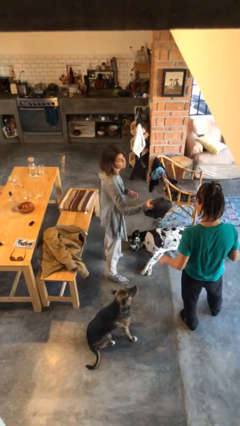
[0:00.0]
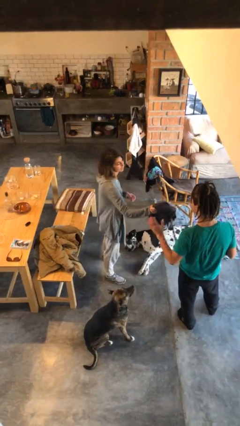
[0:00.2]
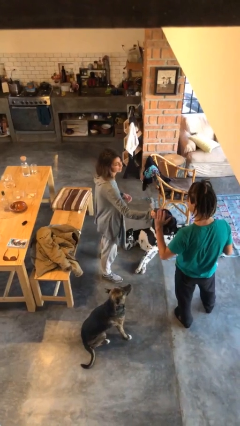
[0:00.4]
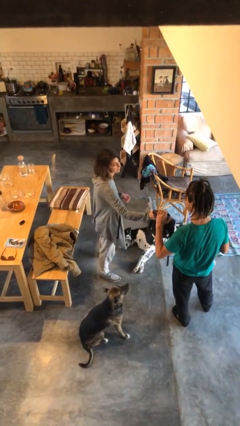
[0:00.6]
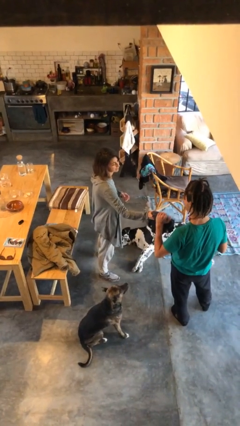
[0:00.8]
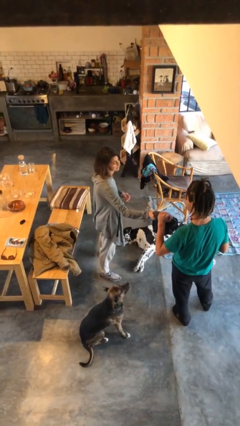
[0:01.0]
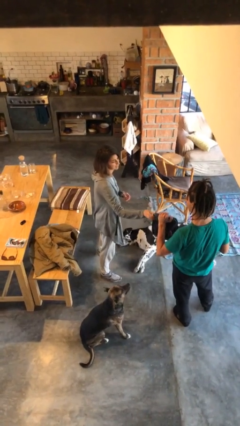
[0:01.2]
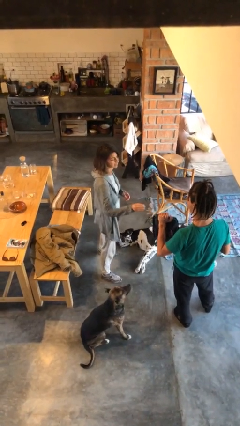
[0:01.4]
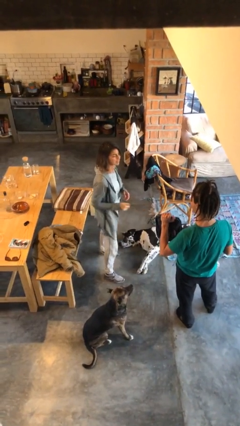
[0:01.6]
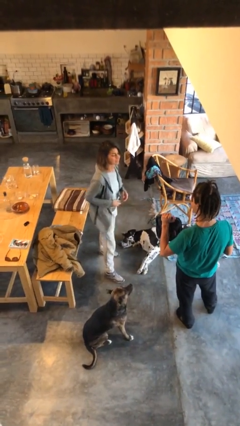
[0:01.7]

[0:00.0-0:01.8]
person transfers object to person

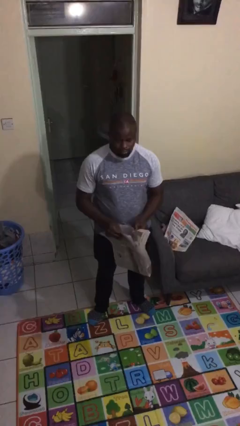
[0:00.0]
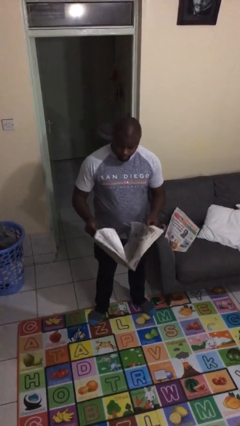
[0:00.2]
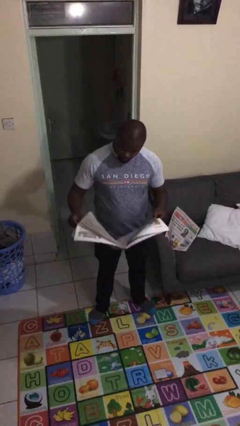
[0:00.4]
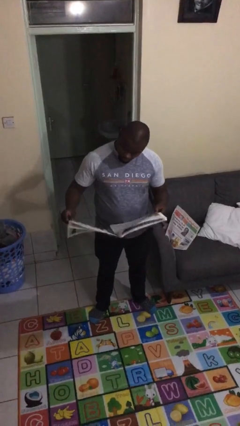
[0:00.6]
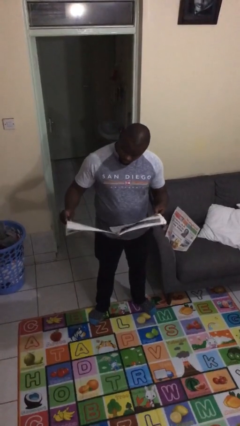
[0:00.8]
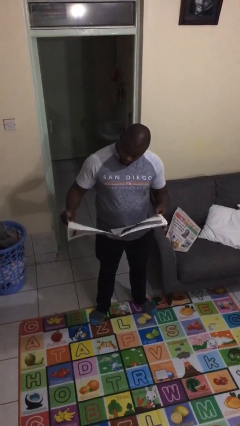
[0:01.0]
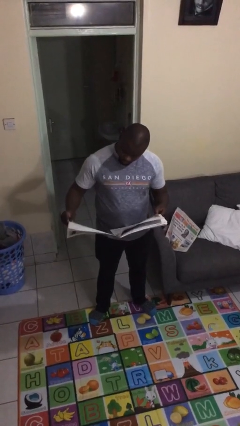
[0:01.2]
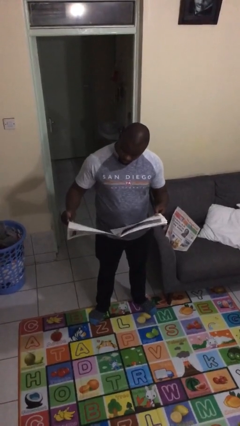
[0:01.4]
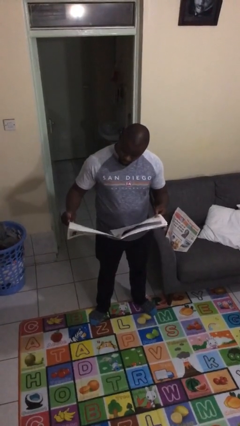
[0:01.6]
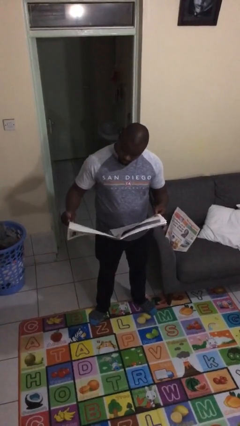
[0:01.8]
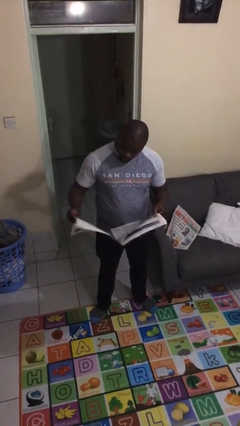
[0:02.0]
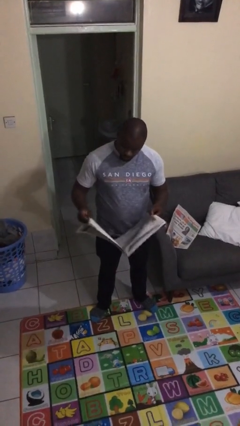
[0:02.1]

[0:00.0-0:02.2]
person reads newspaper

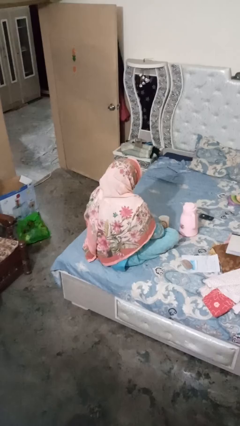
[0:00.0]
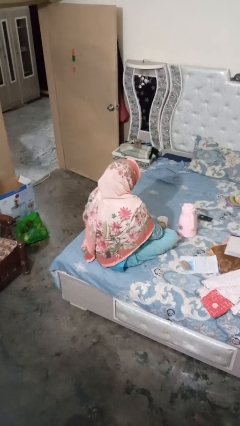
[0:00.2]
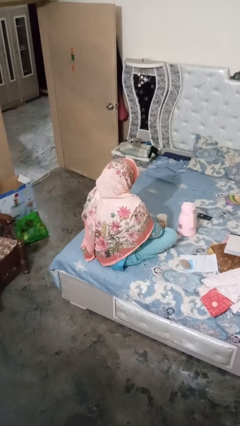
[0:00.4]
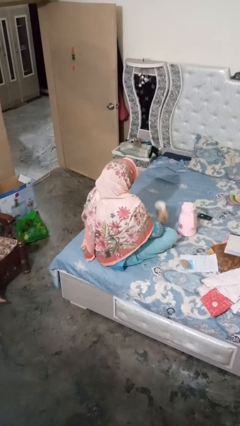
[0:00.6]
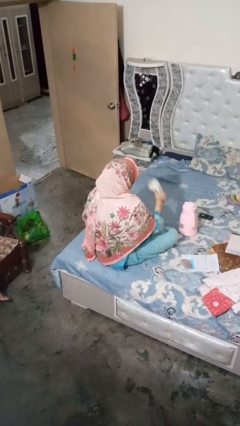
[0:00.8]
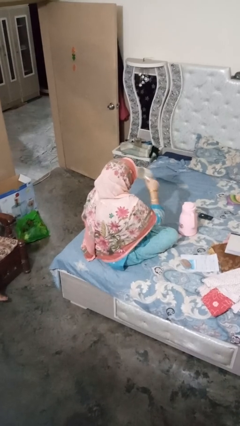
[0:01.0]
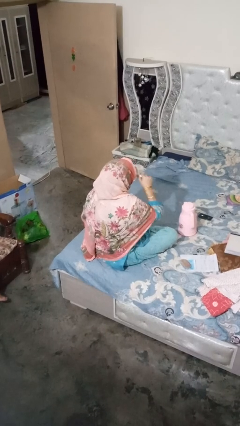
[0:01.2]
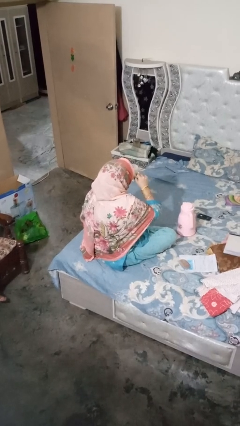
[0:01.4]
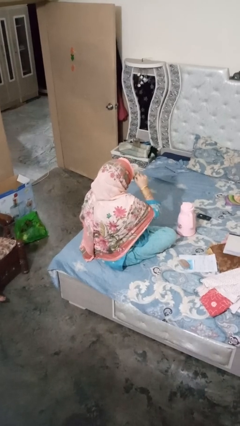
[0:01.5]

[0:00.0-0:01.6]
person pours coffee into mug

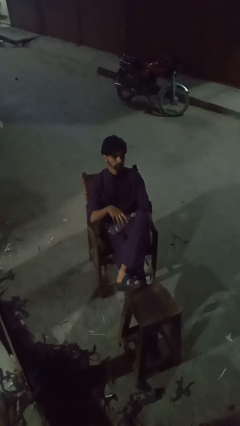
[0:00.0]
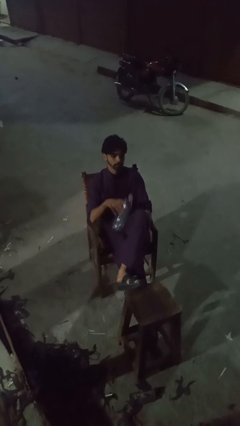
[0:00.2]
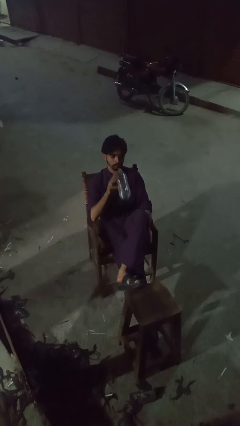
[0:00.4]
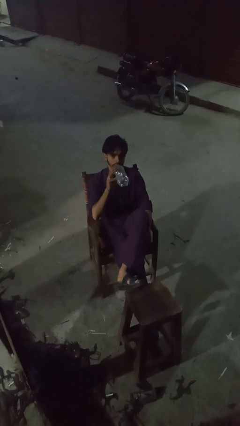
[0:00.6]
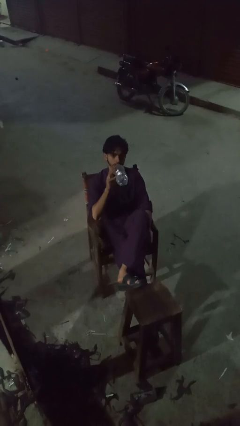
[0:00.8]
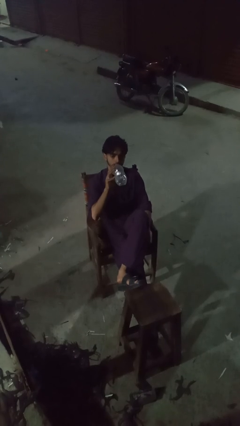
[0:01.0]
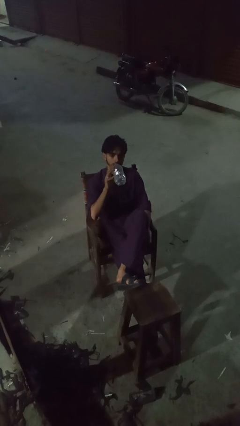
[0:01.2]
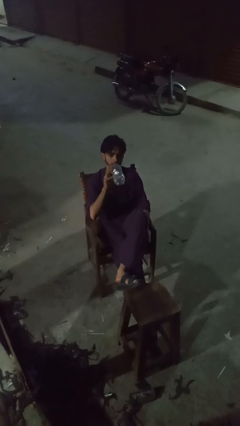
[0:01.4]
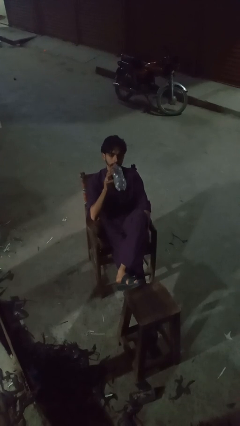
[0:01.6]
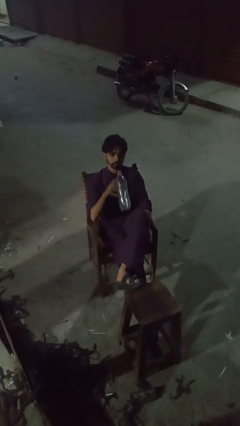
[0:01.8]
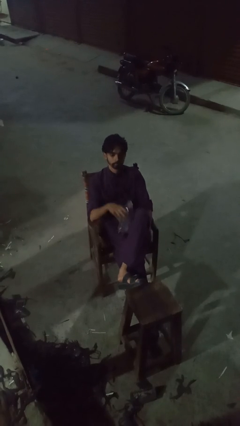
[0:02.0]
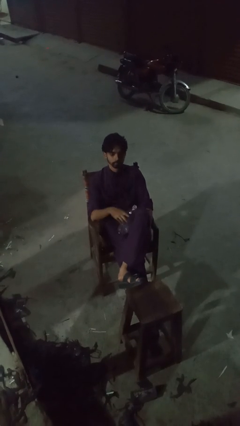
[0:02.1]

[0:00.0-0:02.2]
person drinks from bottle

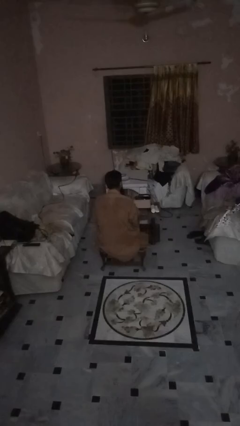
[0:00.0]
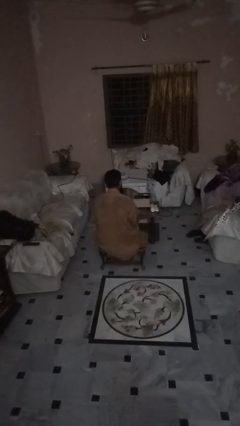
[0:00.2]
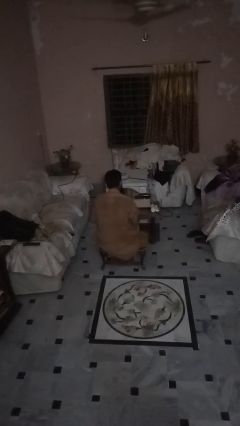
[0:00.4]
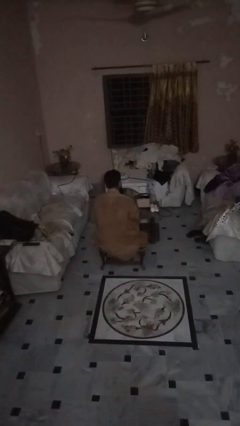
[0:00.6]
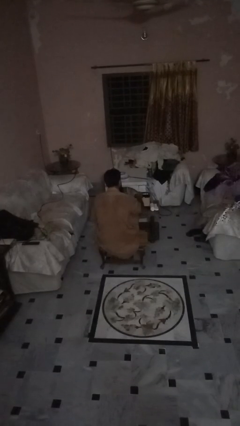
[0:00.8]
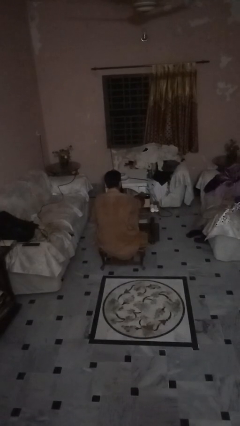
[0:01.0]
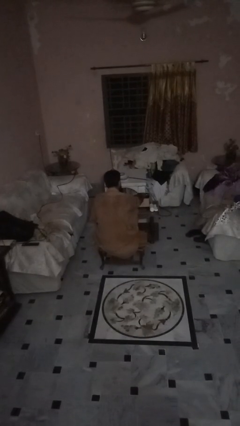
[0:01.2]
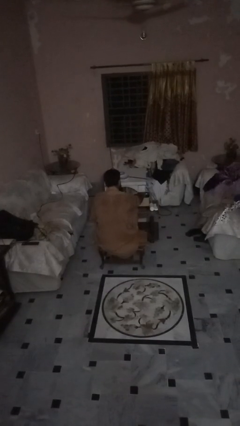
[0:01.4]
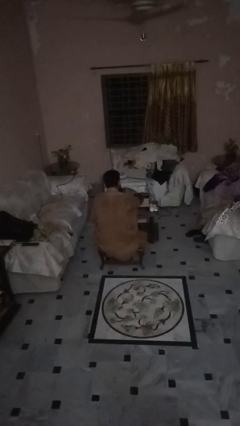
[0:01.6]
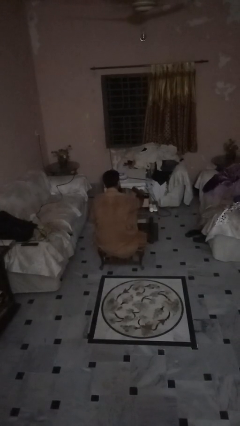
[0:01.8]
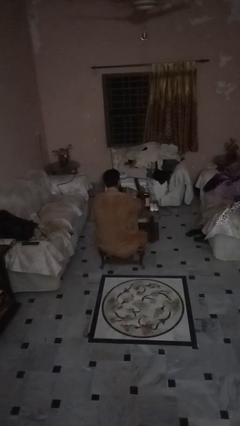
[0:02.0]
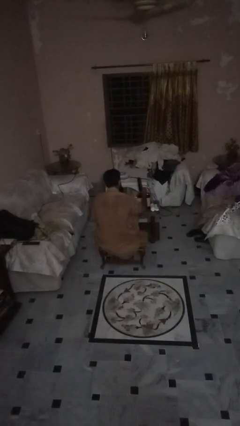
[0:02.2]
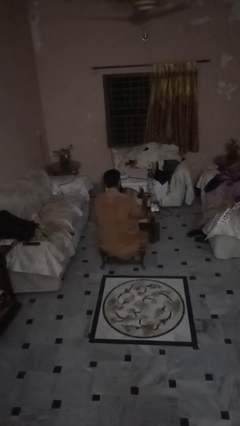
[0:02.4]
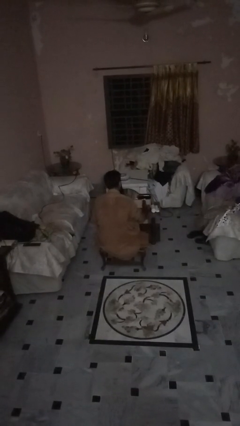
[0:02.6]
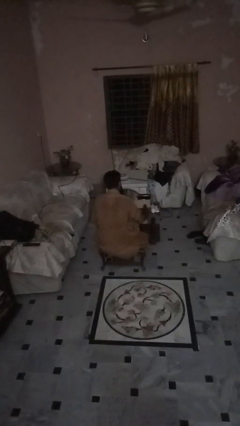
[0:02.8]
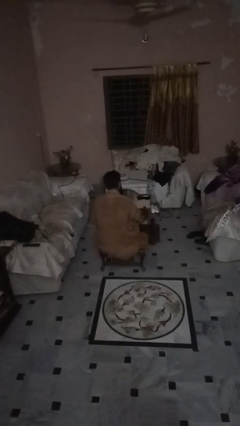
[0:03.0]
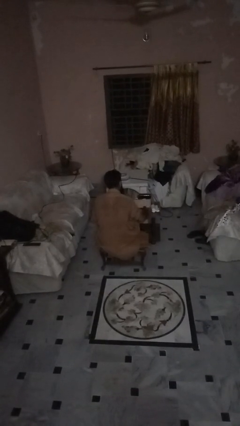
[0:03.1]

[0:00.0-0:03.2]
person unloads box onto table

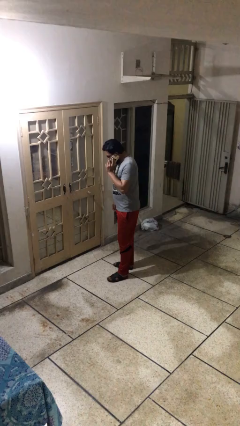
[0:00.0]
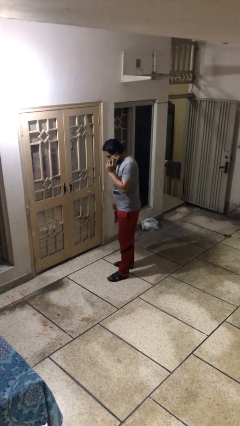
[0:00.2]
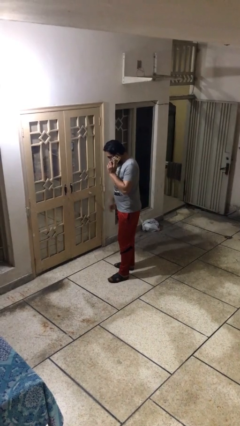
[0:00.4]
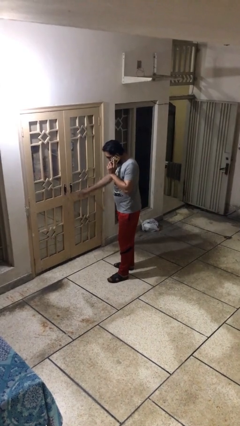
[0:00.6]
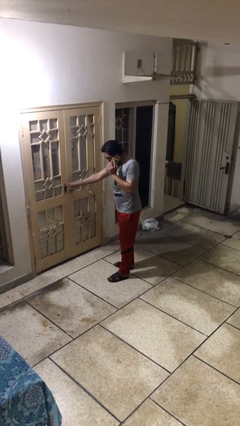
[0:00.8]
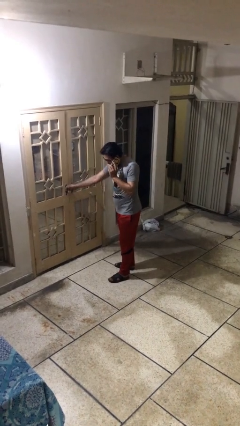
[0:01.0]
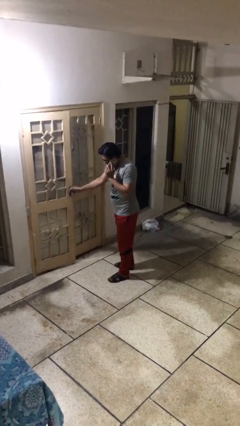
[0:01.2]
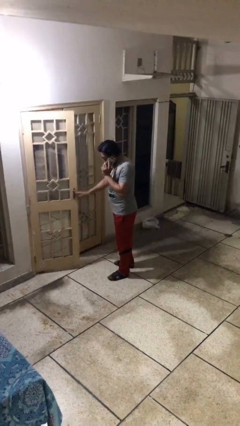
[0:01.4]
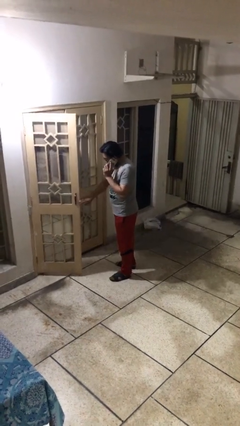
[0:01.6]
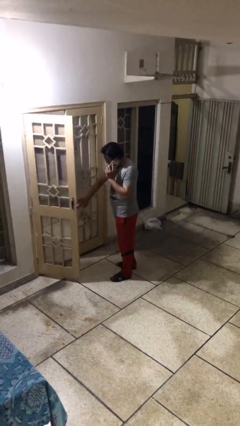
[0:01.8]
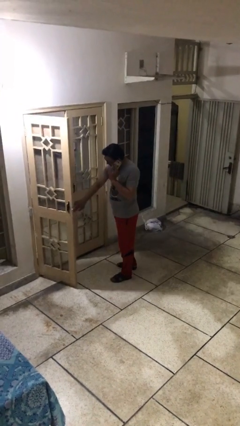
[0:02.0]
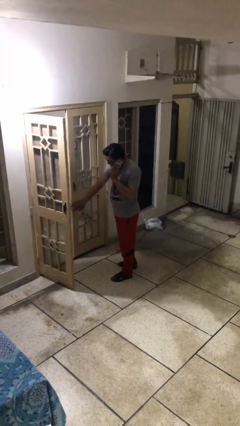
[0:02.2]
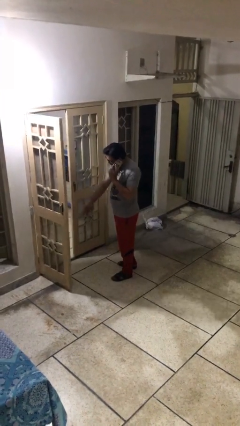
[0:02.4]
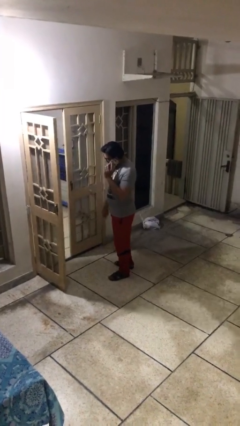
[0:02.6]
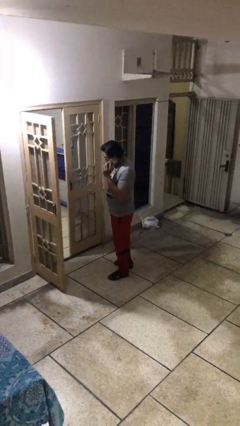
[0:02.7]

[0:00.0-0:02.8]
person opens facility door

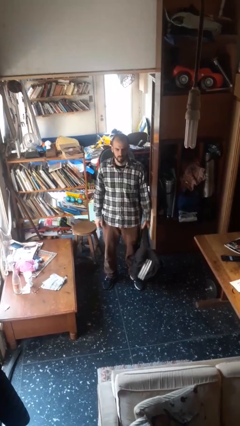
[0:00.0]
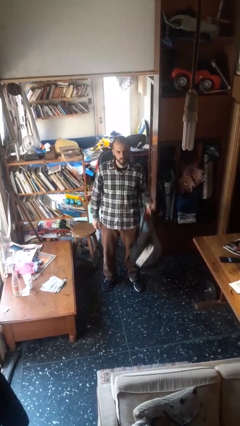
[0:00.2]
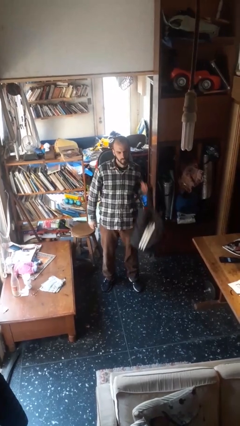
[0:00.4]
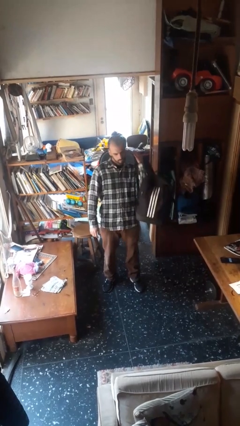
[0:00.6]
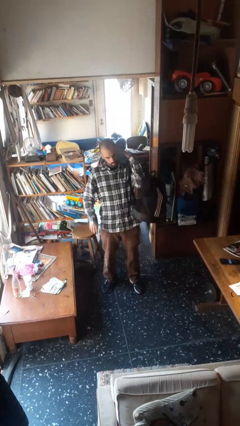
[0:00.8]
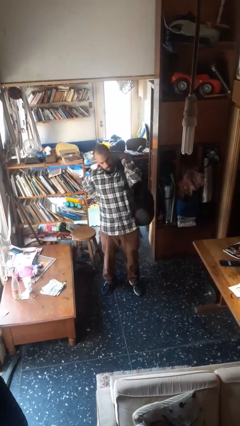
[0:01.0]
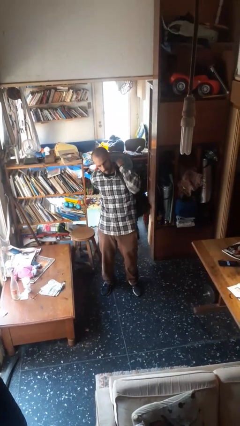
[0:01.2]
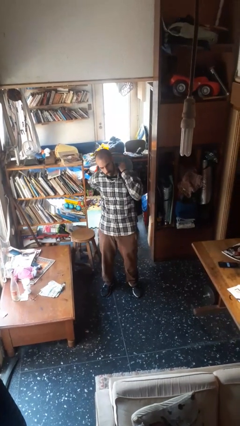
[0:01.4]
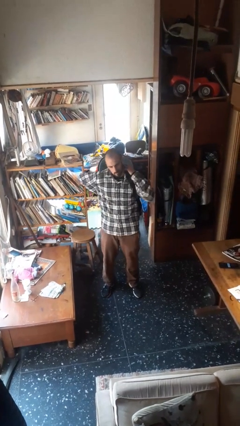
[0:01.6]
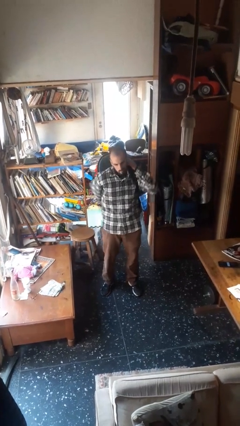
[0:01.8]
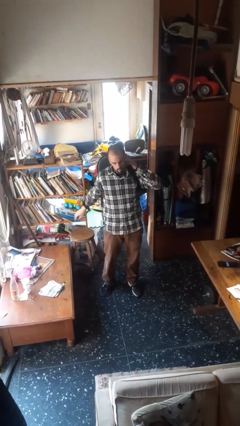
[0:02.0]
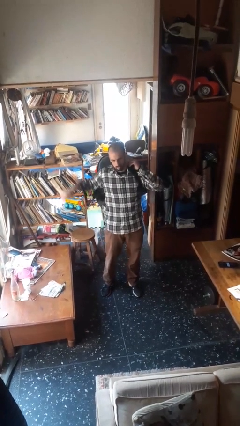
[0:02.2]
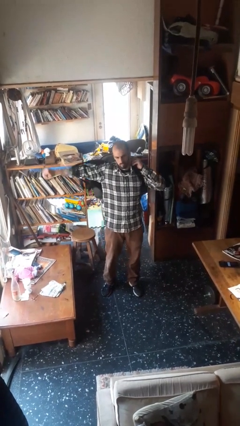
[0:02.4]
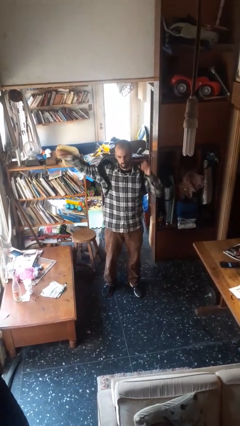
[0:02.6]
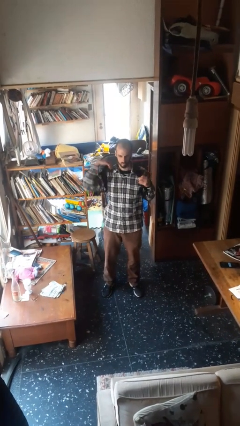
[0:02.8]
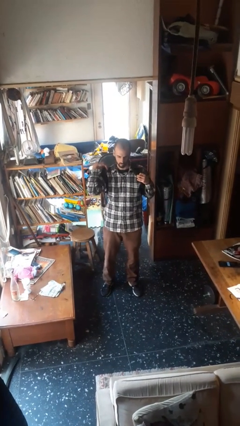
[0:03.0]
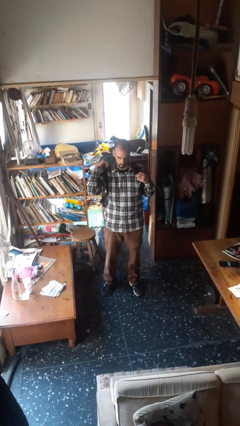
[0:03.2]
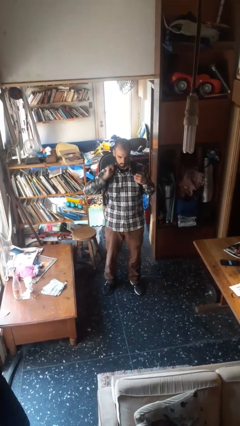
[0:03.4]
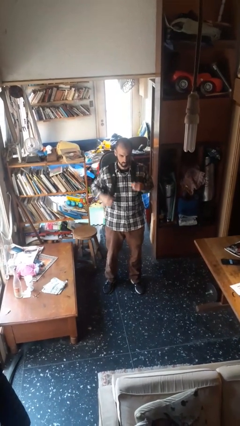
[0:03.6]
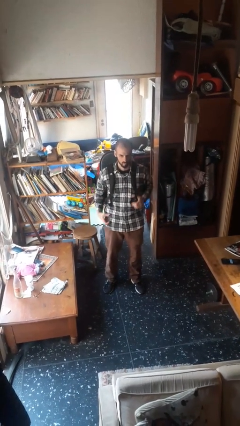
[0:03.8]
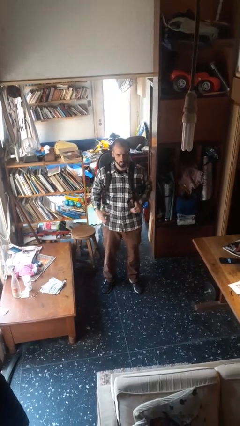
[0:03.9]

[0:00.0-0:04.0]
person puts on backpack
